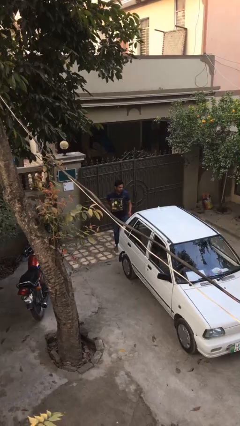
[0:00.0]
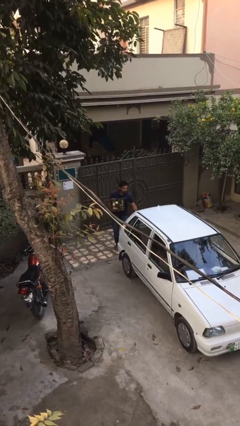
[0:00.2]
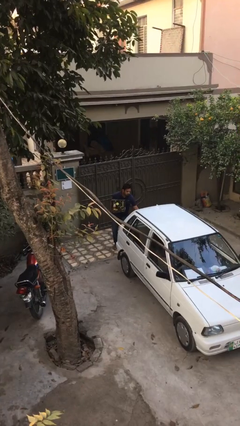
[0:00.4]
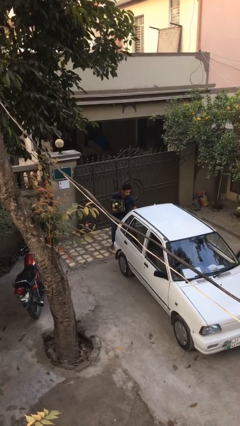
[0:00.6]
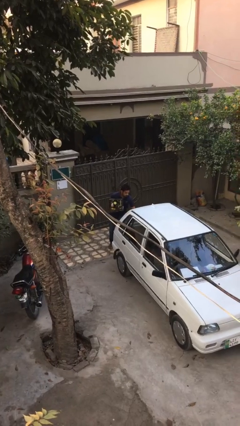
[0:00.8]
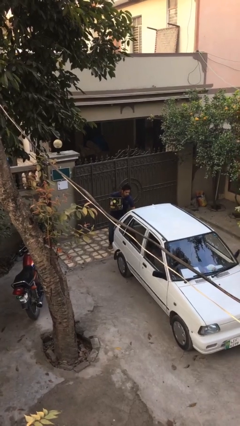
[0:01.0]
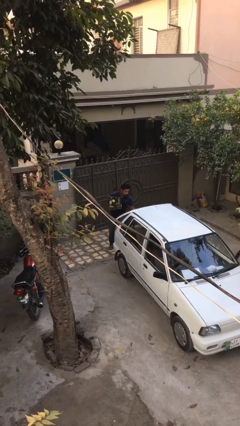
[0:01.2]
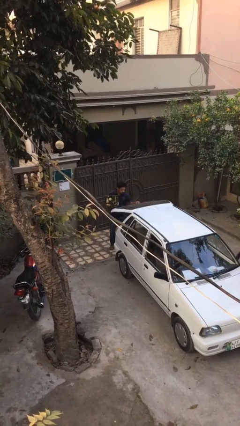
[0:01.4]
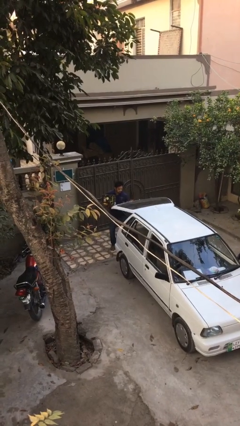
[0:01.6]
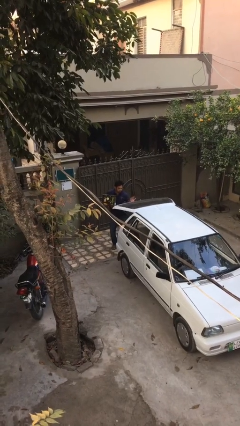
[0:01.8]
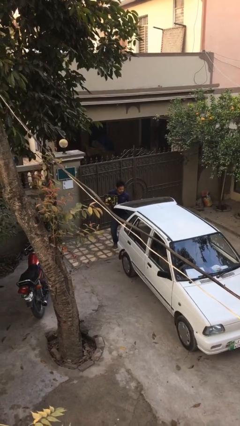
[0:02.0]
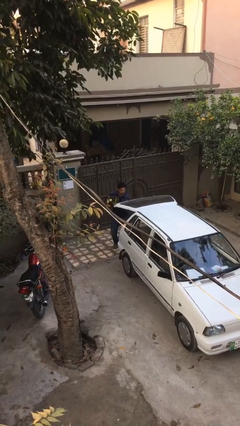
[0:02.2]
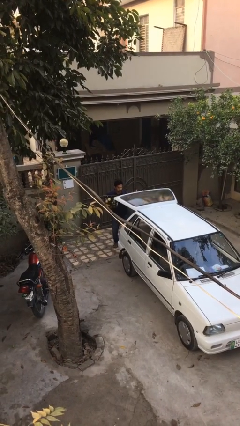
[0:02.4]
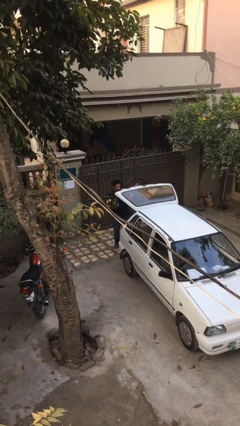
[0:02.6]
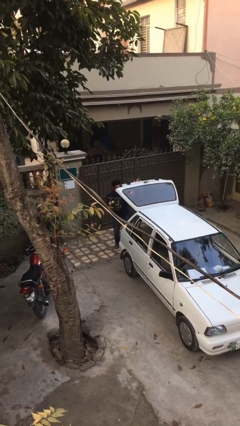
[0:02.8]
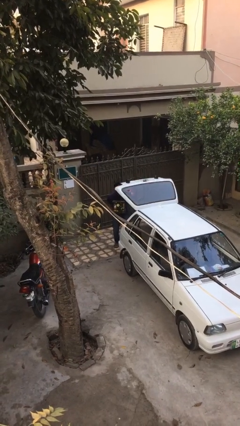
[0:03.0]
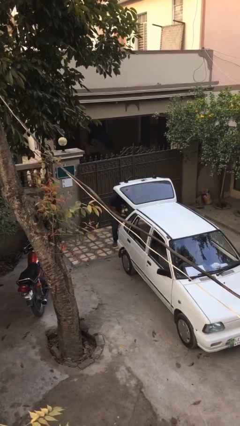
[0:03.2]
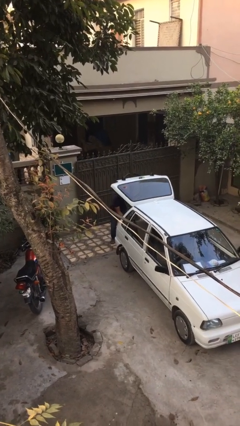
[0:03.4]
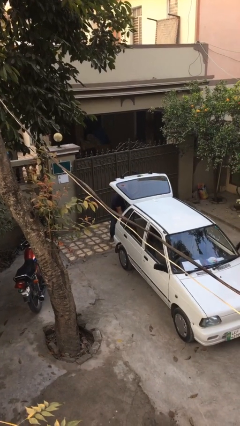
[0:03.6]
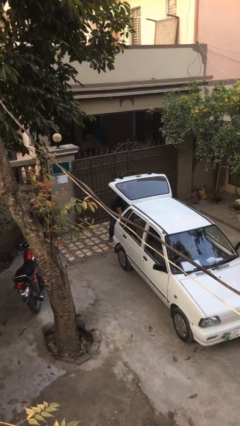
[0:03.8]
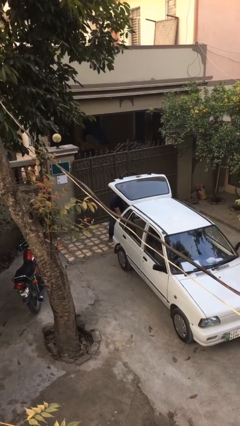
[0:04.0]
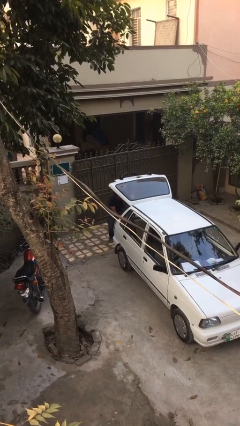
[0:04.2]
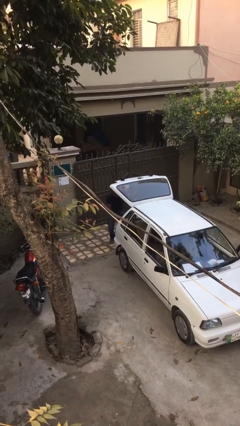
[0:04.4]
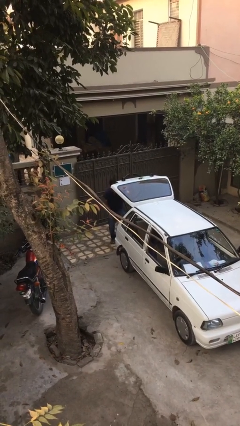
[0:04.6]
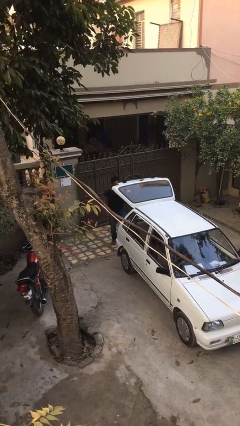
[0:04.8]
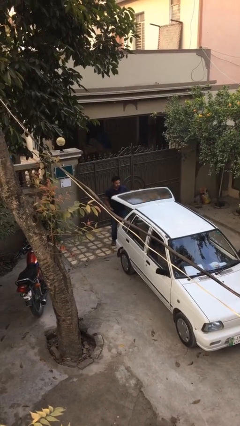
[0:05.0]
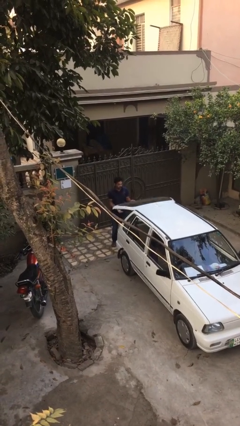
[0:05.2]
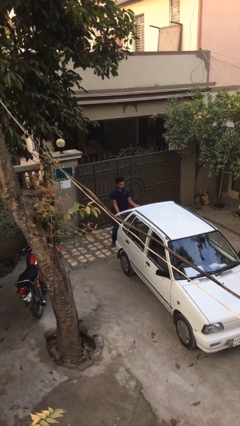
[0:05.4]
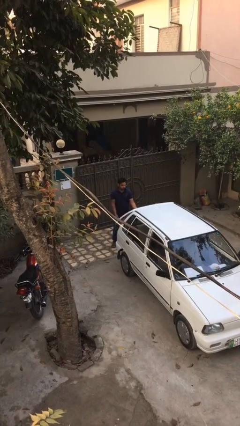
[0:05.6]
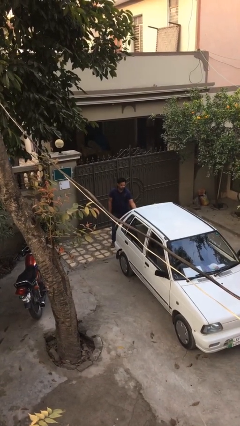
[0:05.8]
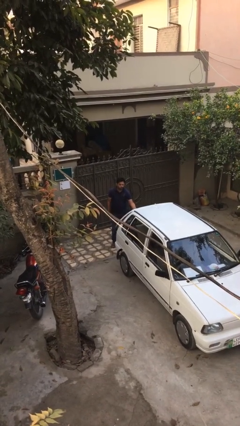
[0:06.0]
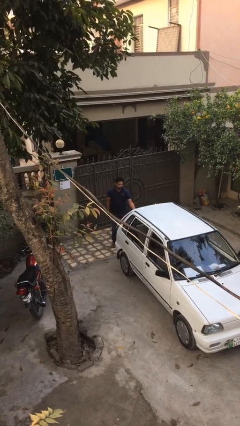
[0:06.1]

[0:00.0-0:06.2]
person loads car

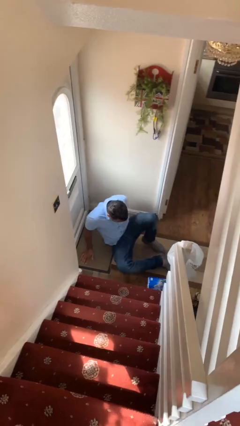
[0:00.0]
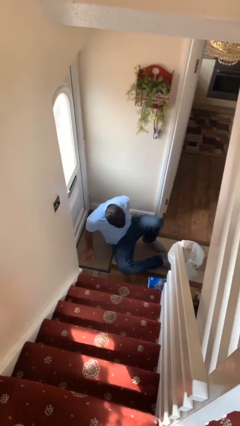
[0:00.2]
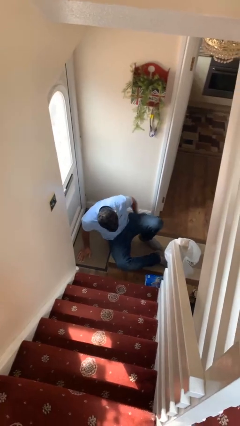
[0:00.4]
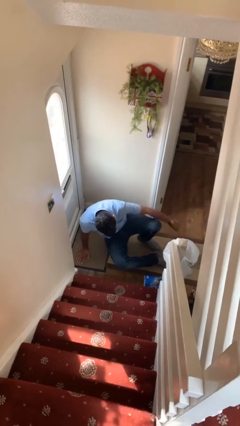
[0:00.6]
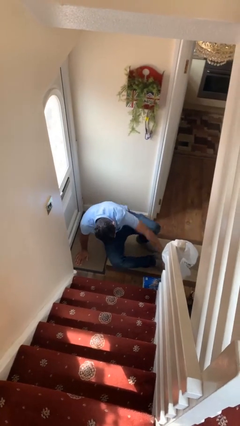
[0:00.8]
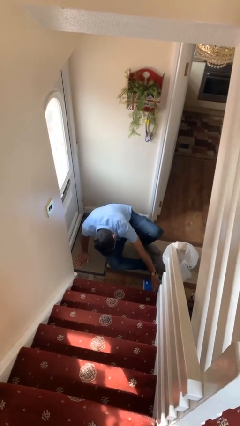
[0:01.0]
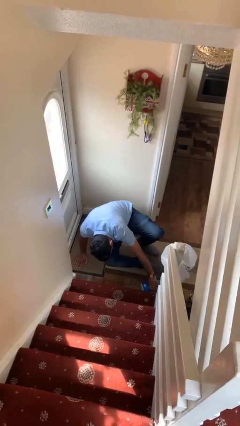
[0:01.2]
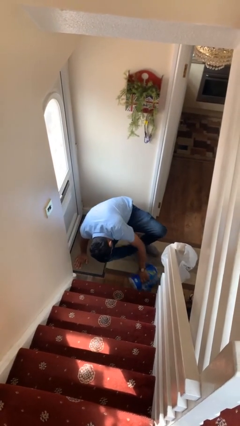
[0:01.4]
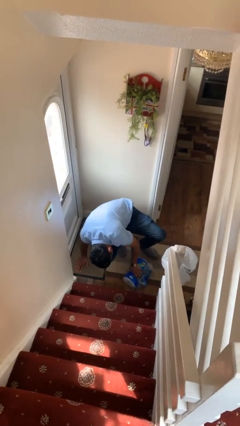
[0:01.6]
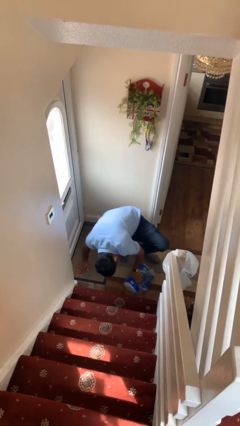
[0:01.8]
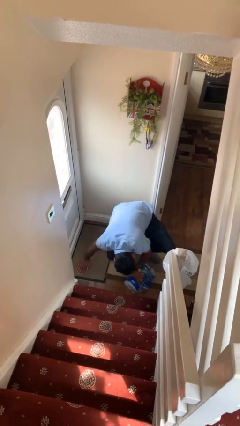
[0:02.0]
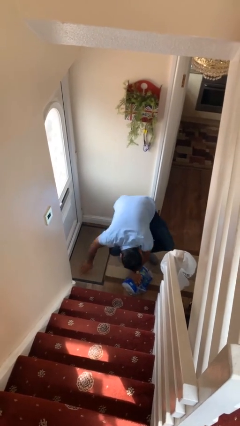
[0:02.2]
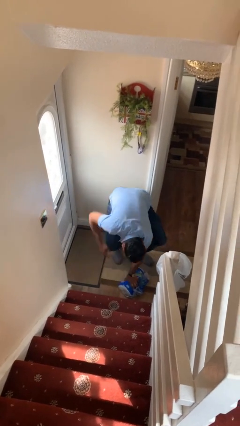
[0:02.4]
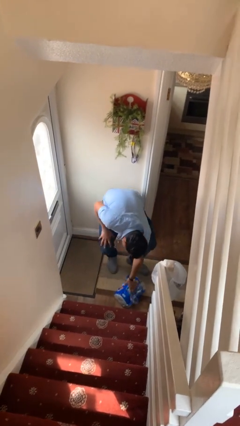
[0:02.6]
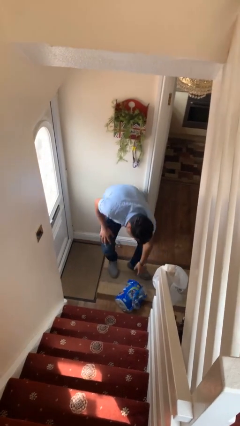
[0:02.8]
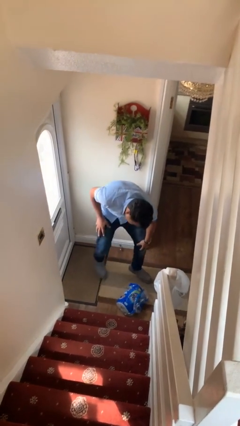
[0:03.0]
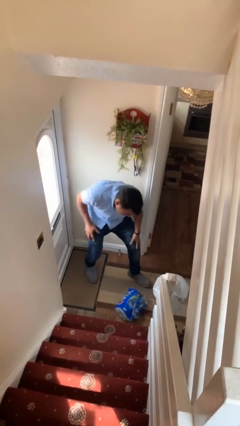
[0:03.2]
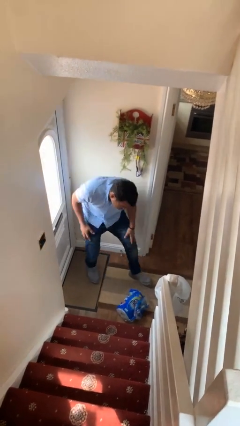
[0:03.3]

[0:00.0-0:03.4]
person stands up from floor

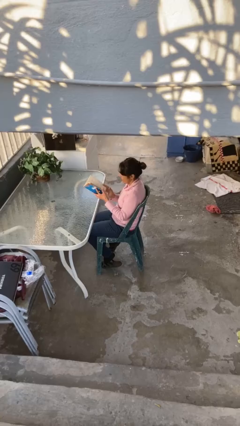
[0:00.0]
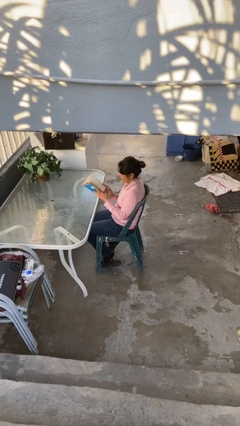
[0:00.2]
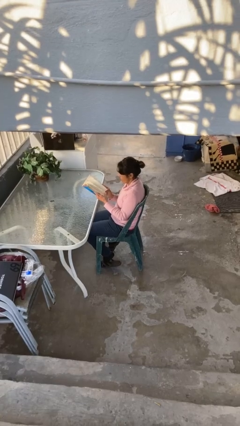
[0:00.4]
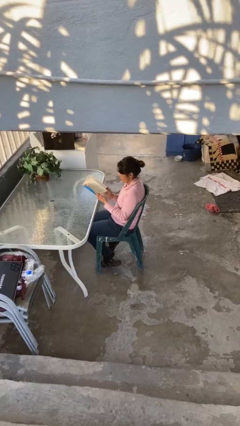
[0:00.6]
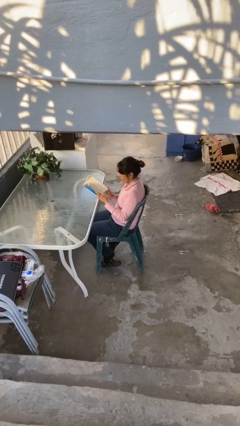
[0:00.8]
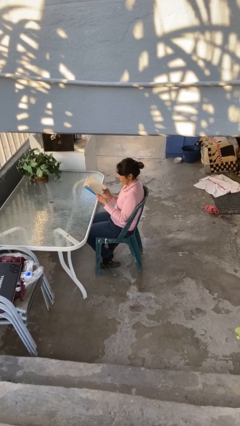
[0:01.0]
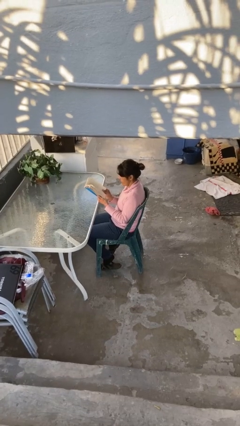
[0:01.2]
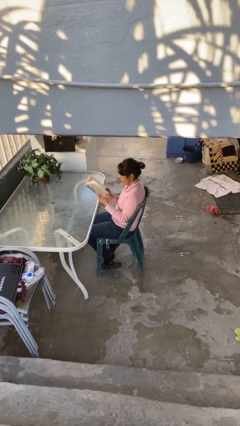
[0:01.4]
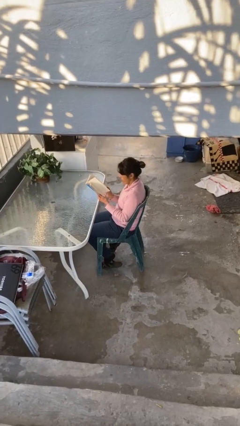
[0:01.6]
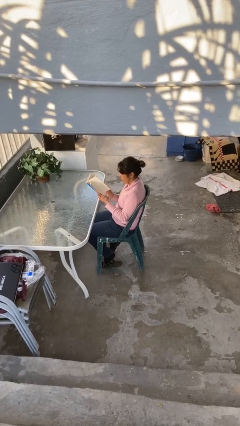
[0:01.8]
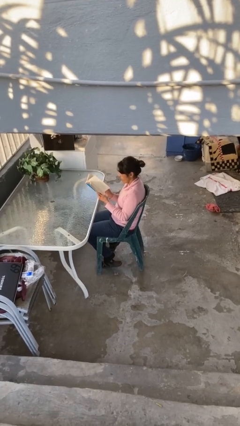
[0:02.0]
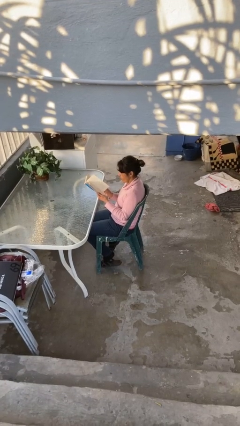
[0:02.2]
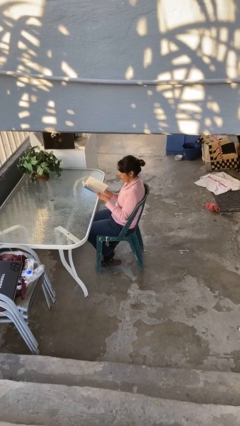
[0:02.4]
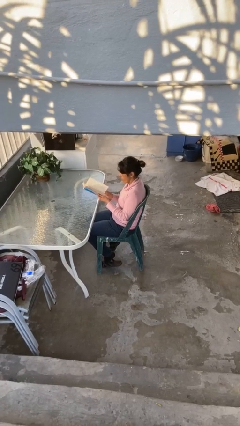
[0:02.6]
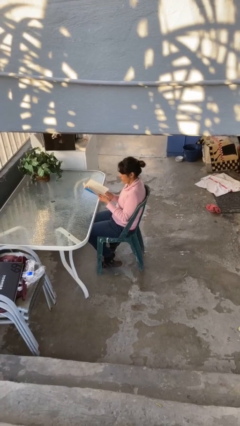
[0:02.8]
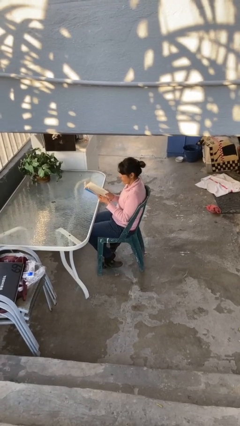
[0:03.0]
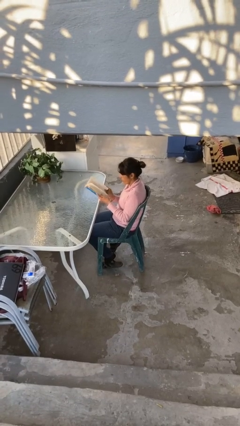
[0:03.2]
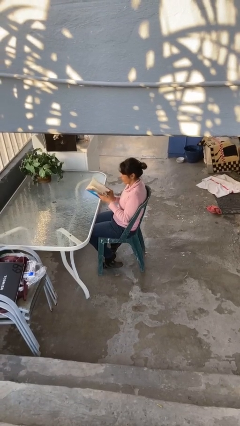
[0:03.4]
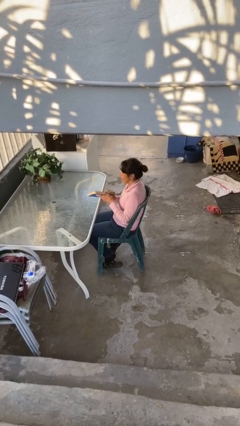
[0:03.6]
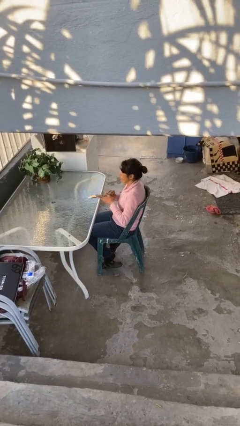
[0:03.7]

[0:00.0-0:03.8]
person reads document

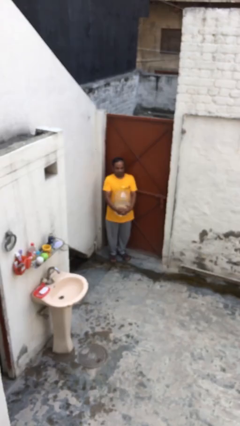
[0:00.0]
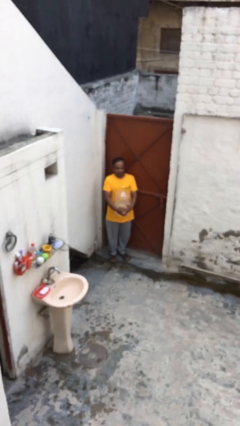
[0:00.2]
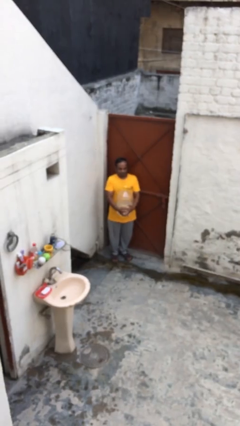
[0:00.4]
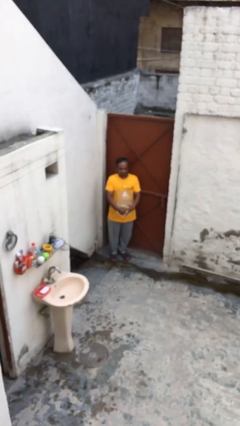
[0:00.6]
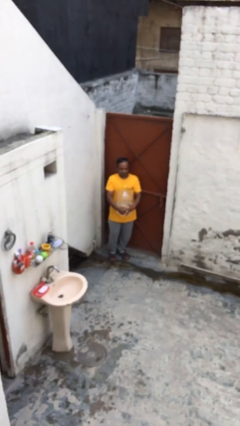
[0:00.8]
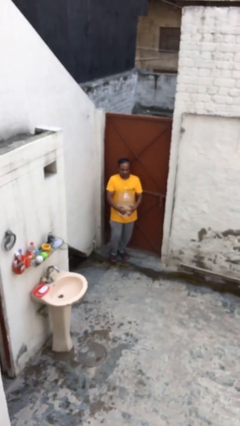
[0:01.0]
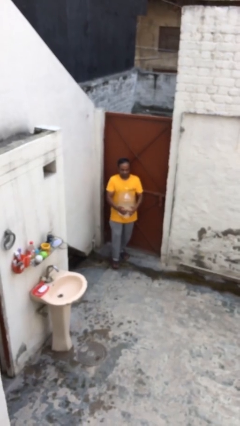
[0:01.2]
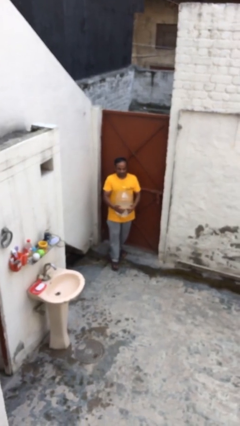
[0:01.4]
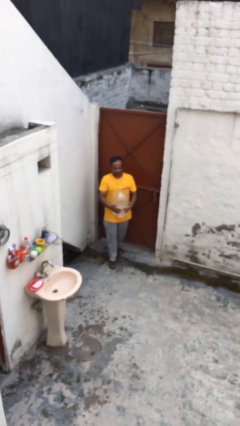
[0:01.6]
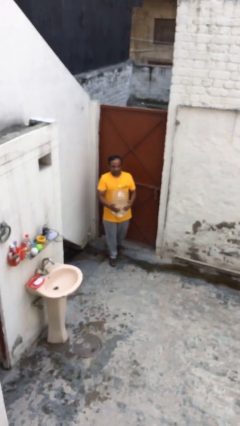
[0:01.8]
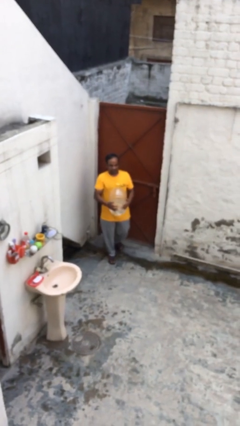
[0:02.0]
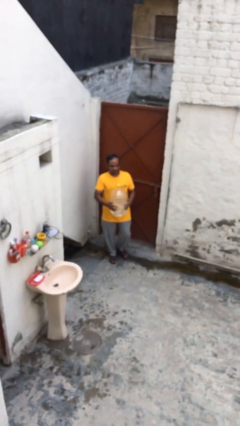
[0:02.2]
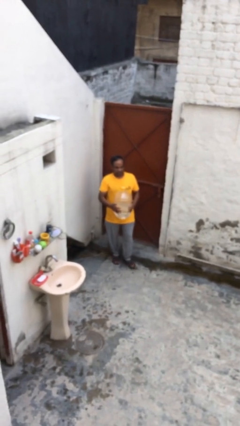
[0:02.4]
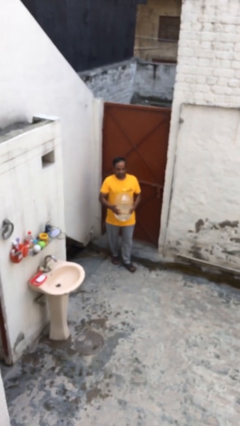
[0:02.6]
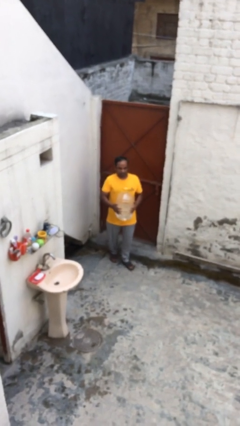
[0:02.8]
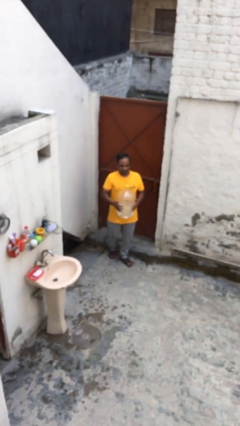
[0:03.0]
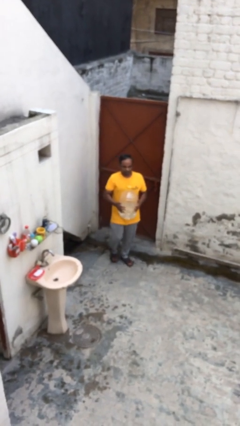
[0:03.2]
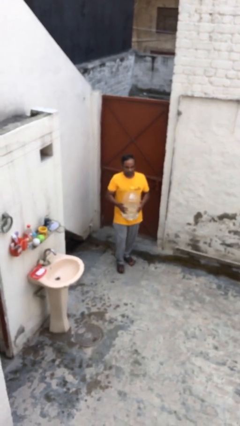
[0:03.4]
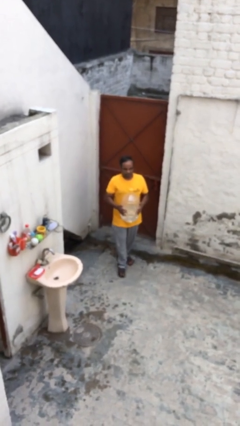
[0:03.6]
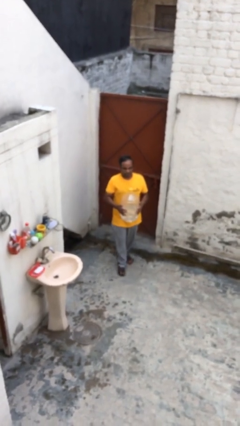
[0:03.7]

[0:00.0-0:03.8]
person carries heavy object

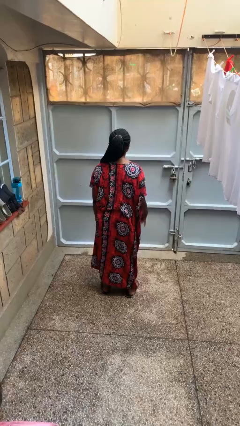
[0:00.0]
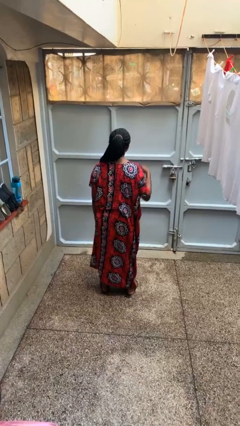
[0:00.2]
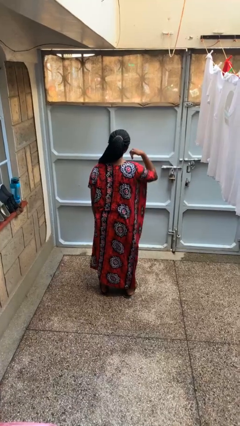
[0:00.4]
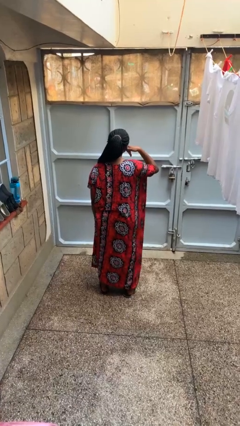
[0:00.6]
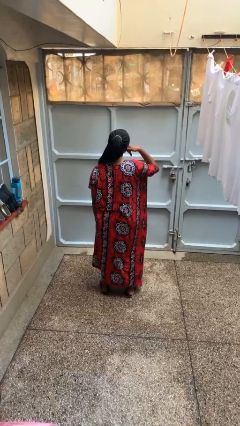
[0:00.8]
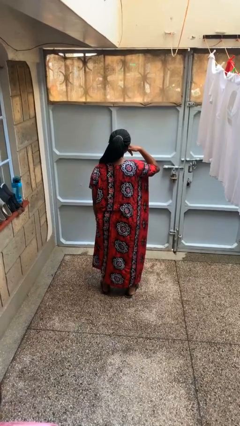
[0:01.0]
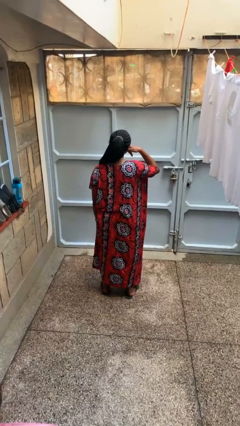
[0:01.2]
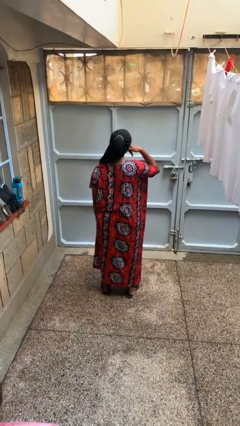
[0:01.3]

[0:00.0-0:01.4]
person gestures call me
